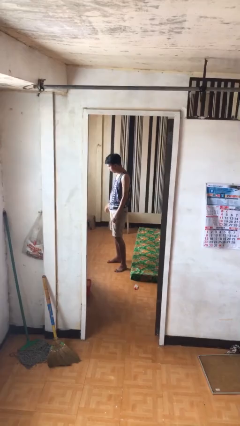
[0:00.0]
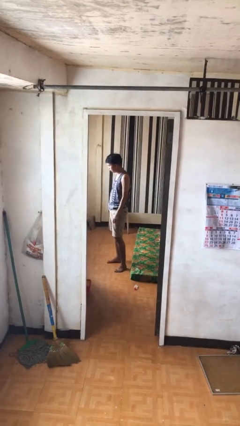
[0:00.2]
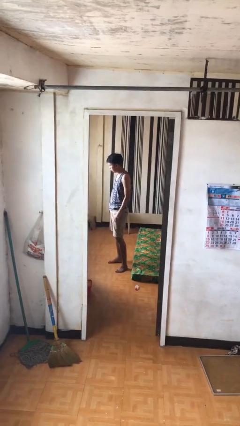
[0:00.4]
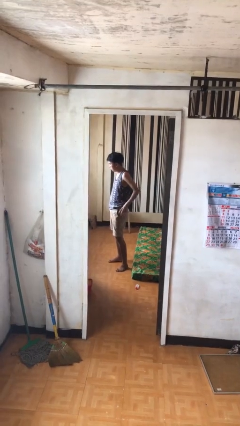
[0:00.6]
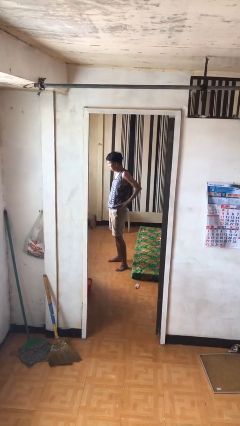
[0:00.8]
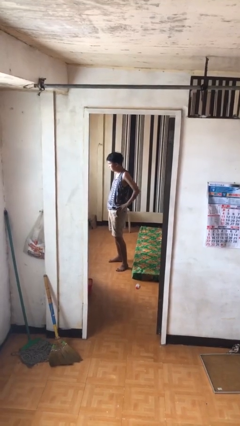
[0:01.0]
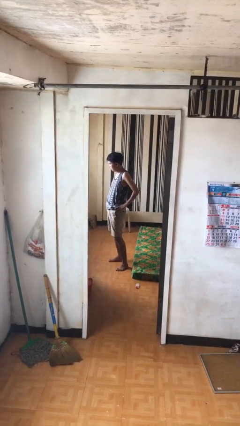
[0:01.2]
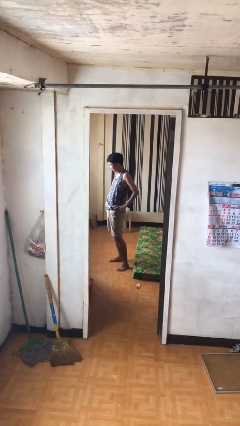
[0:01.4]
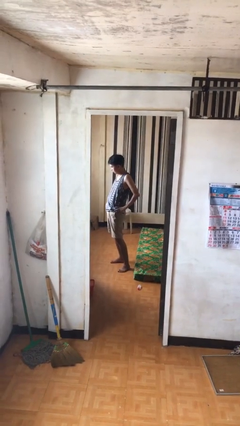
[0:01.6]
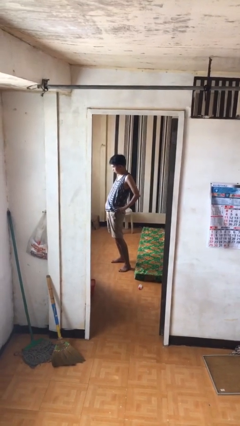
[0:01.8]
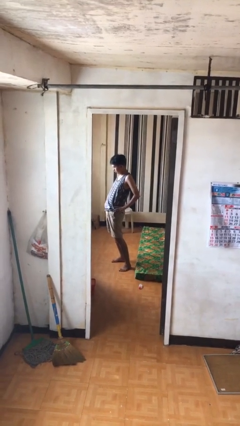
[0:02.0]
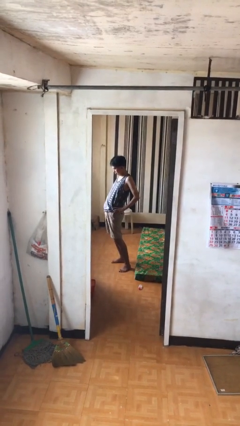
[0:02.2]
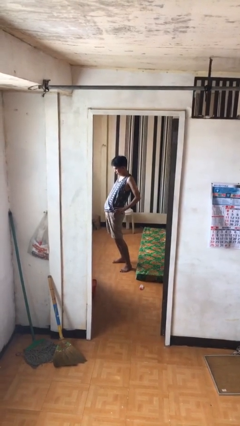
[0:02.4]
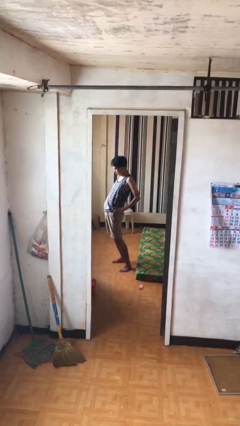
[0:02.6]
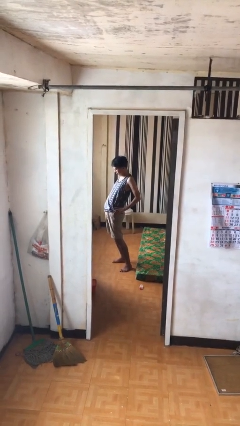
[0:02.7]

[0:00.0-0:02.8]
person stretches back

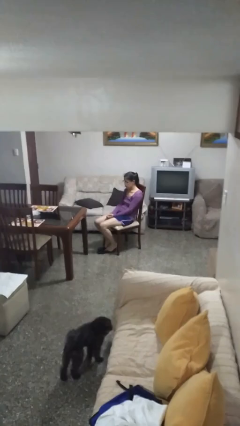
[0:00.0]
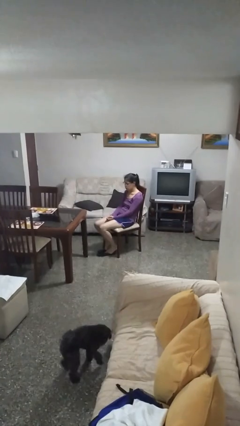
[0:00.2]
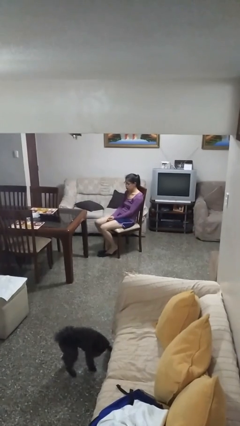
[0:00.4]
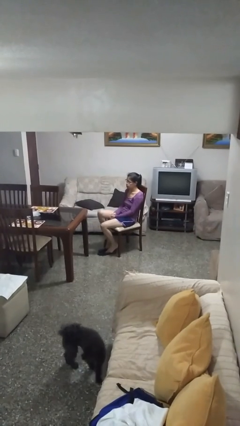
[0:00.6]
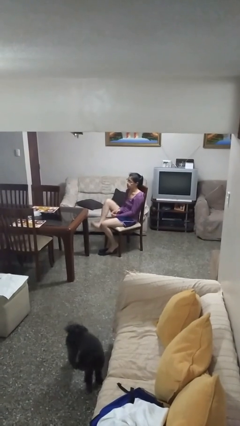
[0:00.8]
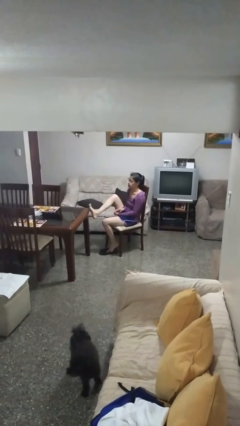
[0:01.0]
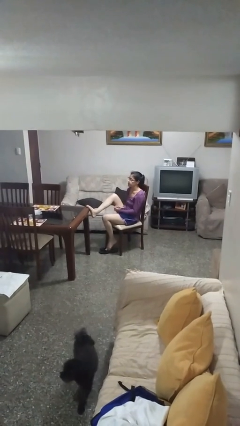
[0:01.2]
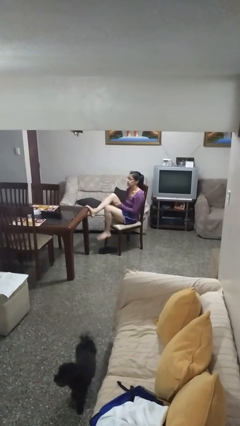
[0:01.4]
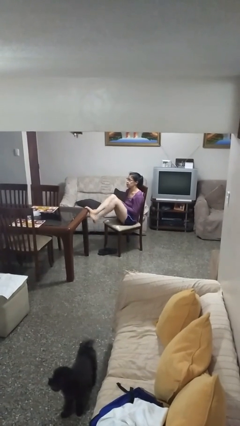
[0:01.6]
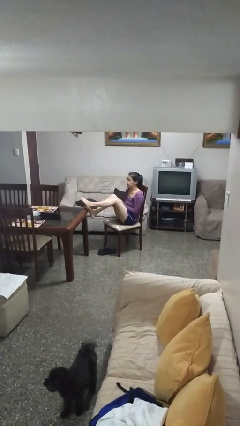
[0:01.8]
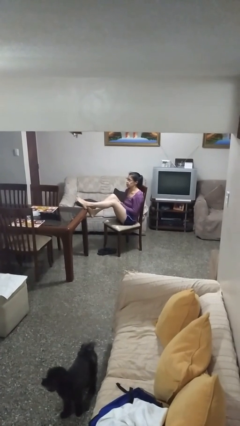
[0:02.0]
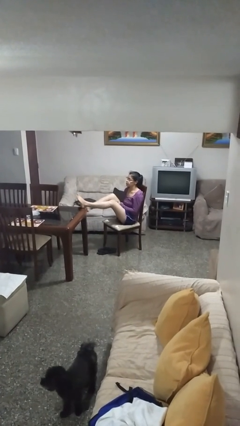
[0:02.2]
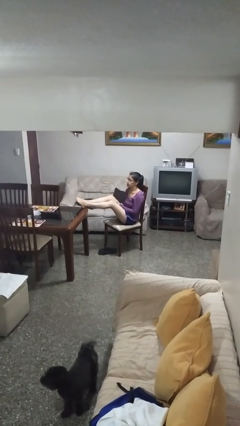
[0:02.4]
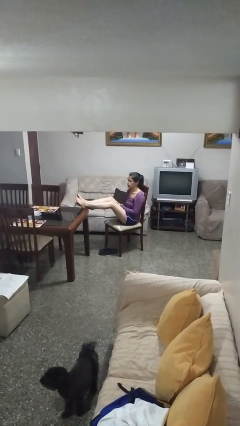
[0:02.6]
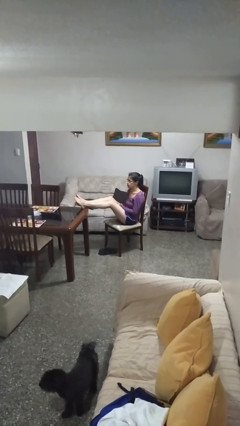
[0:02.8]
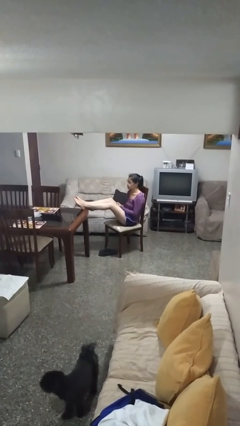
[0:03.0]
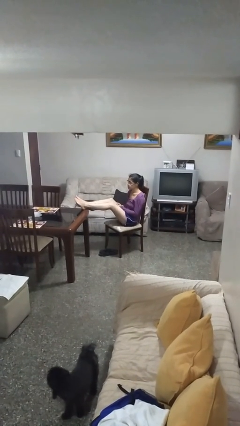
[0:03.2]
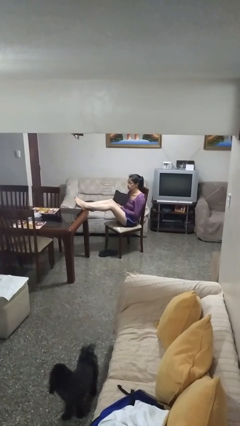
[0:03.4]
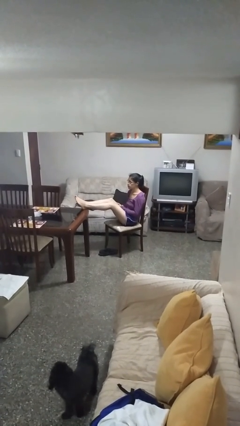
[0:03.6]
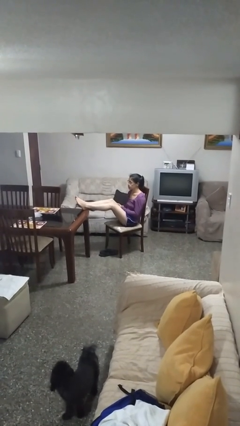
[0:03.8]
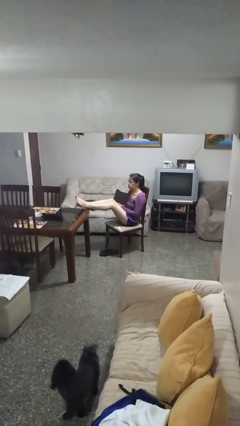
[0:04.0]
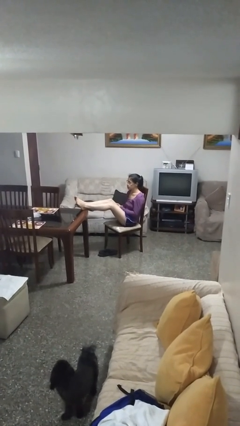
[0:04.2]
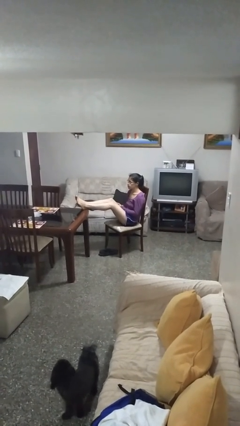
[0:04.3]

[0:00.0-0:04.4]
person puts feet up

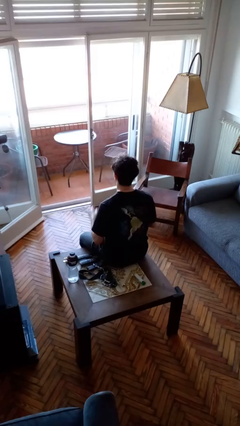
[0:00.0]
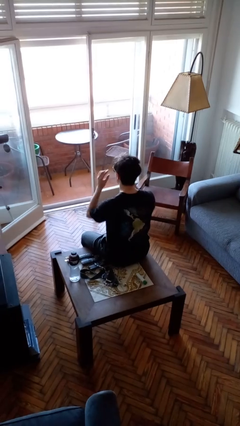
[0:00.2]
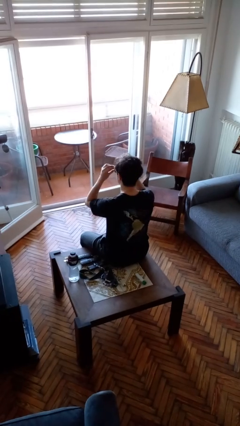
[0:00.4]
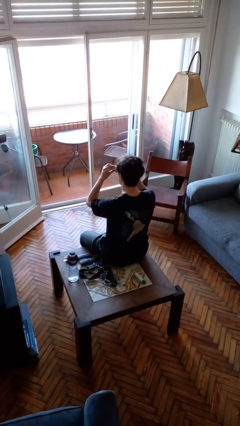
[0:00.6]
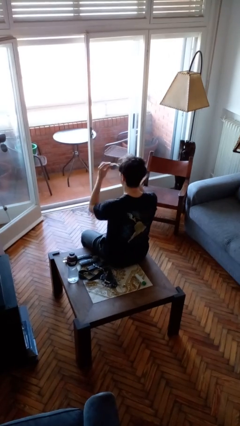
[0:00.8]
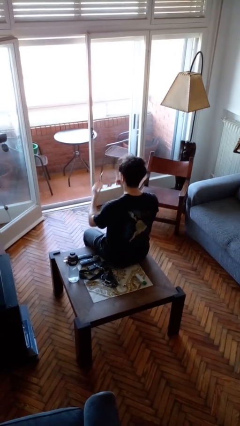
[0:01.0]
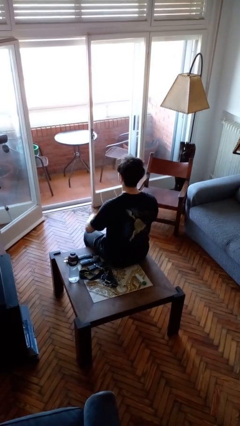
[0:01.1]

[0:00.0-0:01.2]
person takes off sunglasses

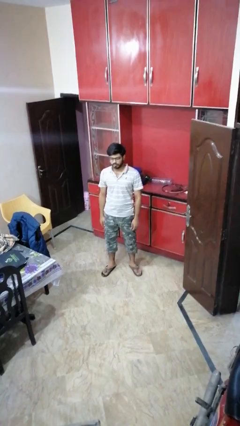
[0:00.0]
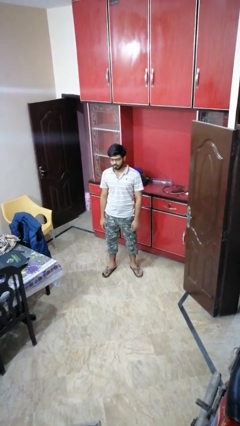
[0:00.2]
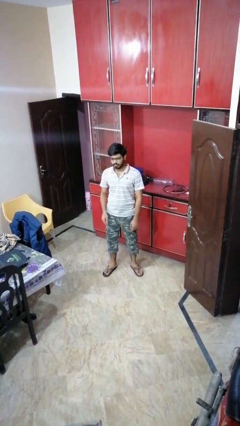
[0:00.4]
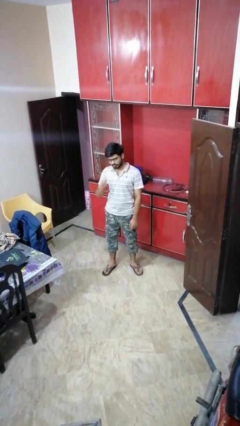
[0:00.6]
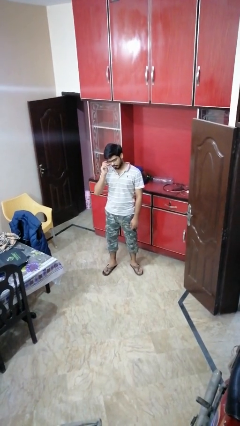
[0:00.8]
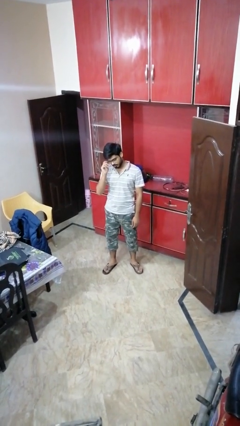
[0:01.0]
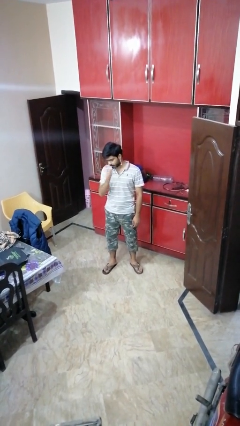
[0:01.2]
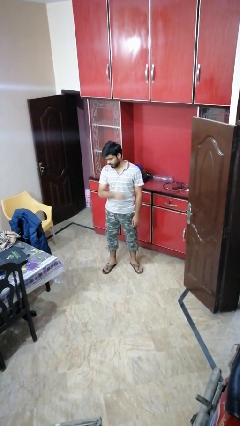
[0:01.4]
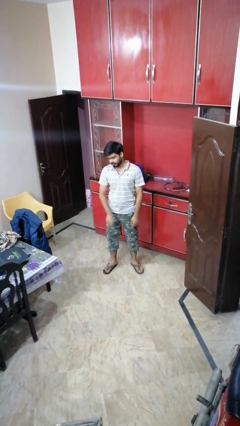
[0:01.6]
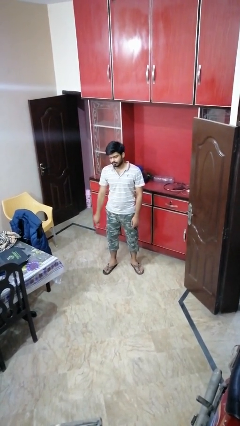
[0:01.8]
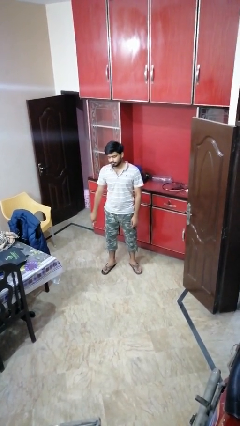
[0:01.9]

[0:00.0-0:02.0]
person takes off glasses

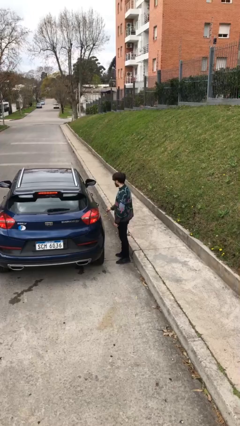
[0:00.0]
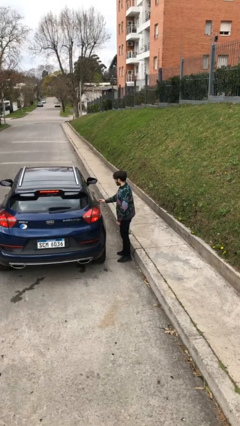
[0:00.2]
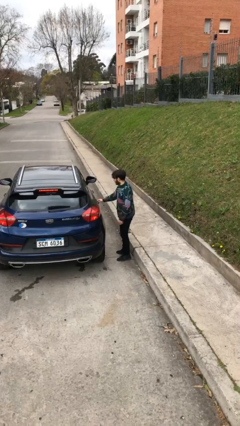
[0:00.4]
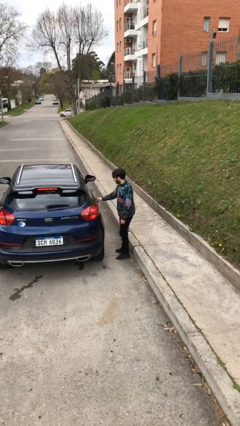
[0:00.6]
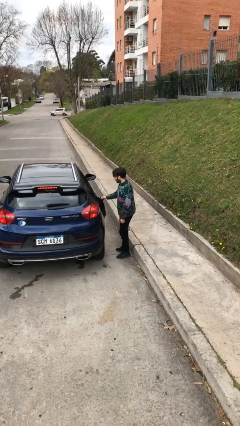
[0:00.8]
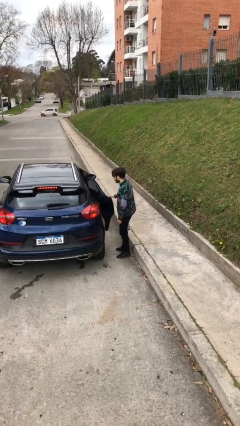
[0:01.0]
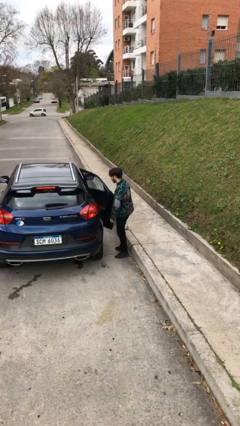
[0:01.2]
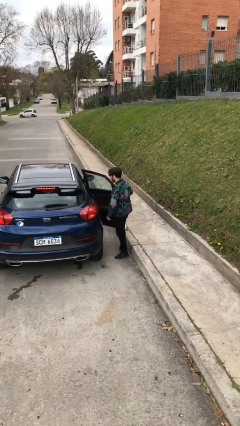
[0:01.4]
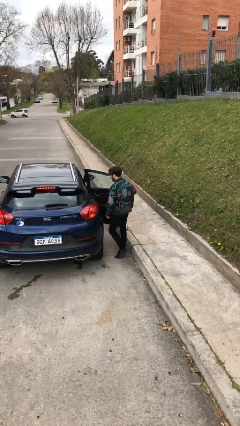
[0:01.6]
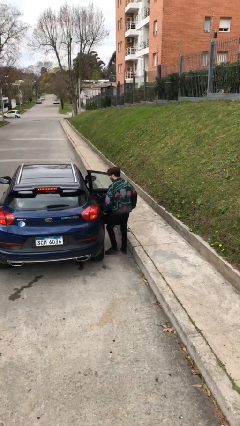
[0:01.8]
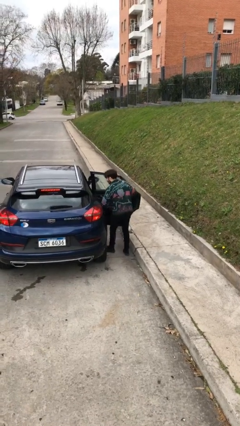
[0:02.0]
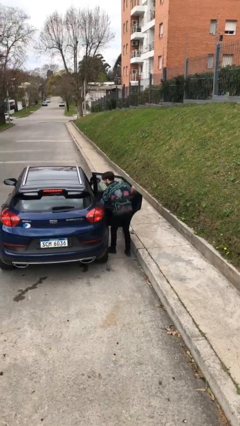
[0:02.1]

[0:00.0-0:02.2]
person opens car door

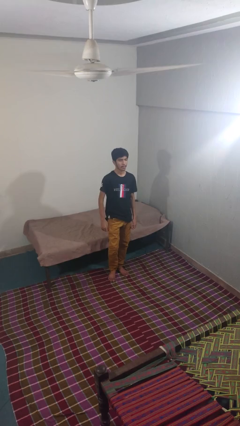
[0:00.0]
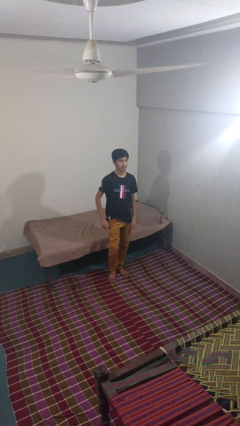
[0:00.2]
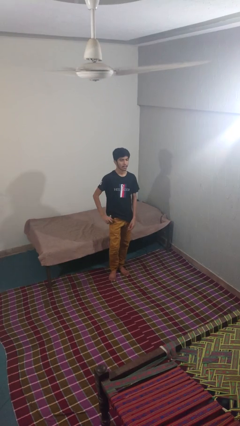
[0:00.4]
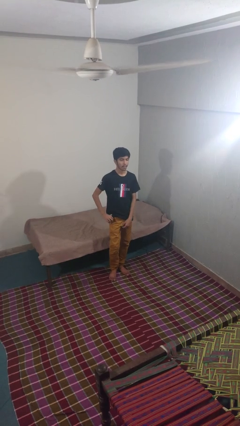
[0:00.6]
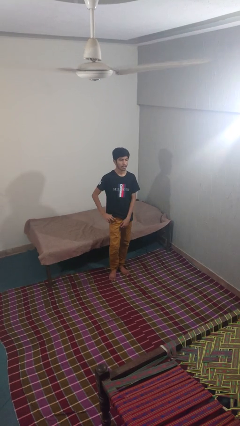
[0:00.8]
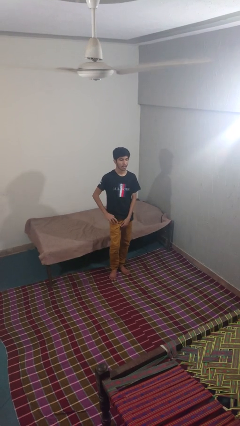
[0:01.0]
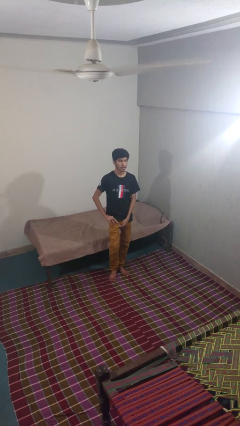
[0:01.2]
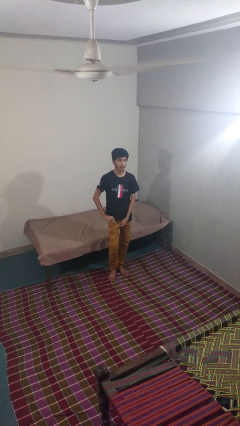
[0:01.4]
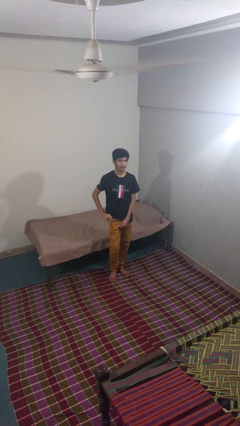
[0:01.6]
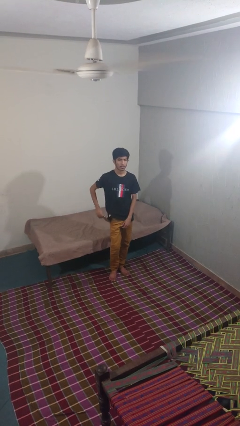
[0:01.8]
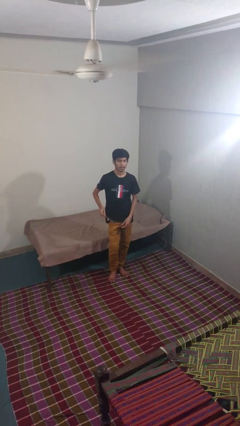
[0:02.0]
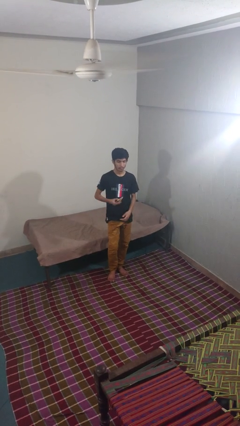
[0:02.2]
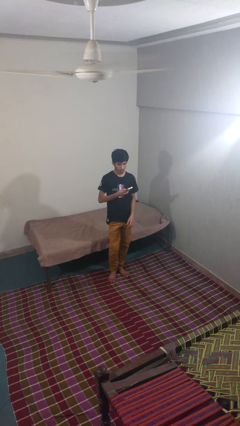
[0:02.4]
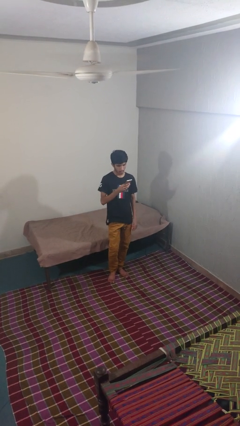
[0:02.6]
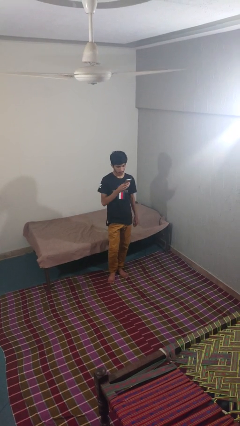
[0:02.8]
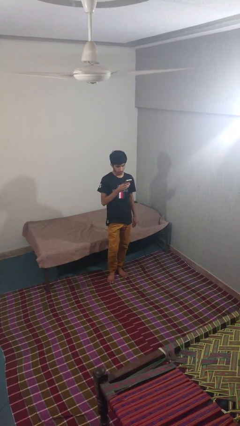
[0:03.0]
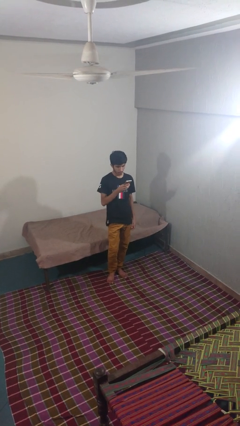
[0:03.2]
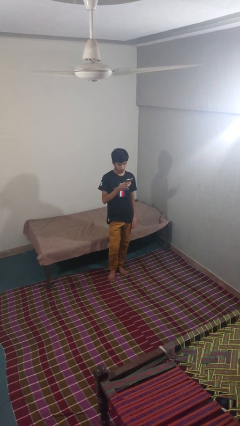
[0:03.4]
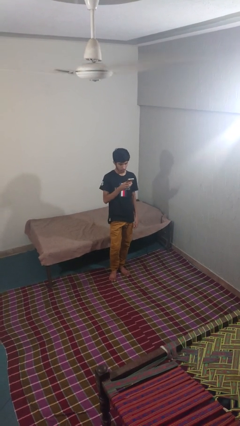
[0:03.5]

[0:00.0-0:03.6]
person takes phone from pocket

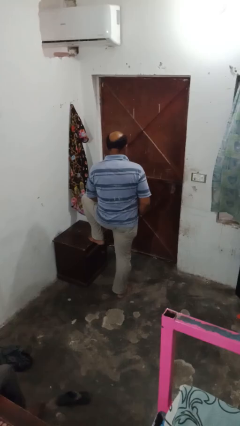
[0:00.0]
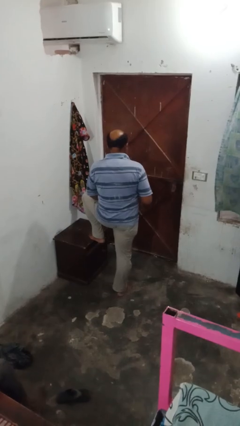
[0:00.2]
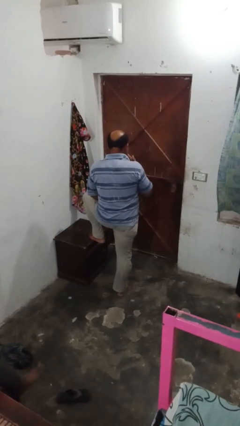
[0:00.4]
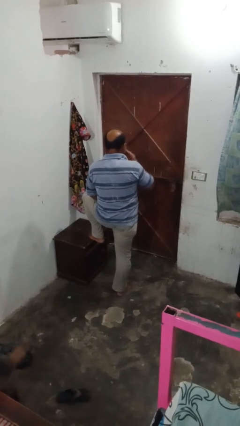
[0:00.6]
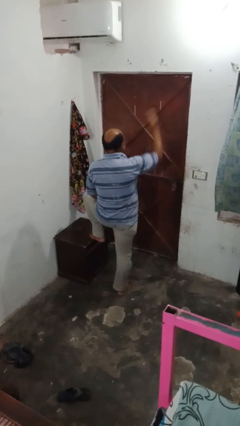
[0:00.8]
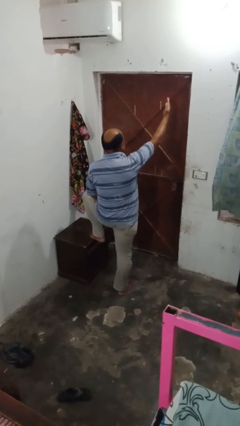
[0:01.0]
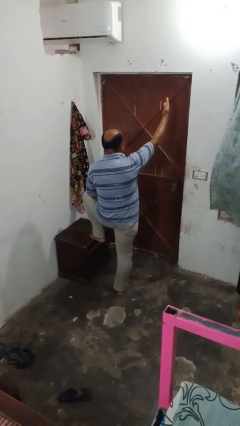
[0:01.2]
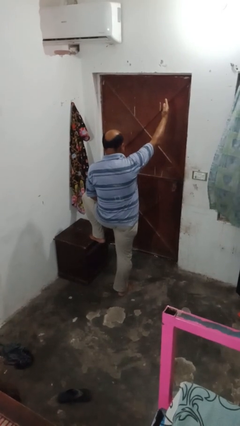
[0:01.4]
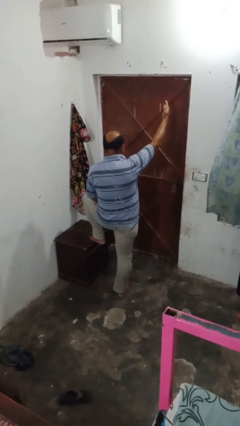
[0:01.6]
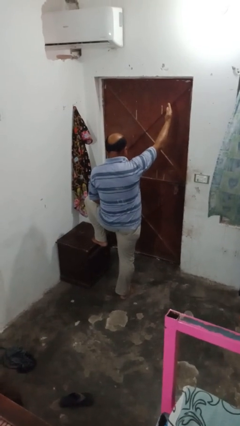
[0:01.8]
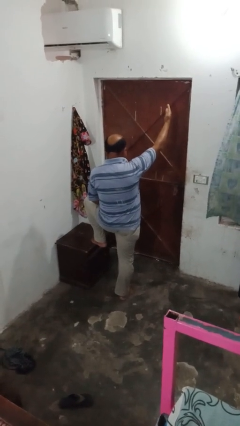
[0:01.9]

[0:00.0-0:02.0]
person gestures blow kiss
